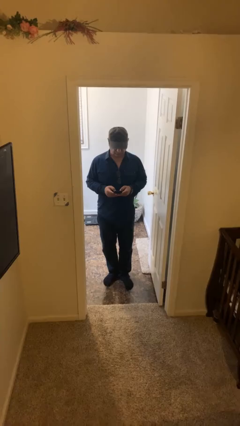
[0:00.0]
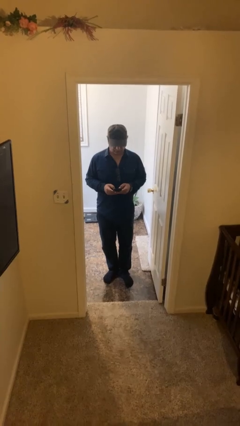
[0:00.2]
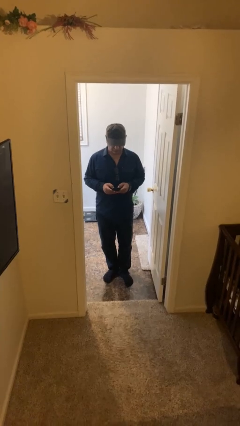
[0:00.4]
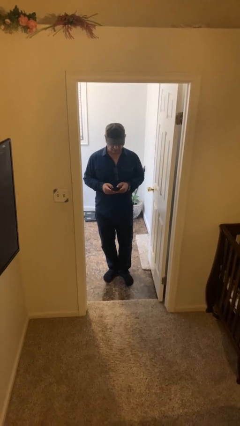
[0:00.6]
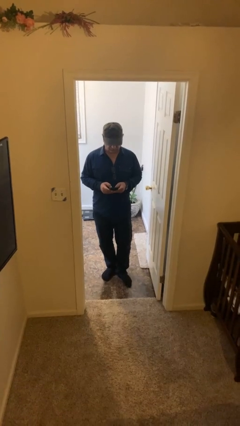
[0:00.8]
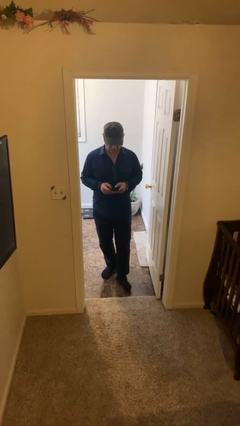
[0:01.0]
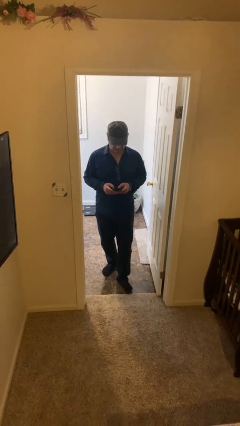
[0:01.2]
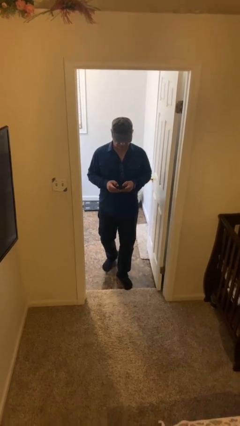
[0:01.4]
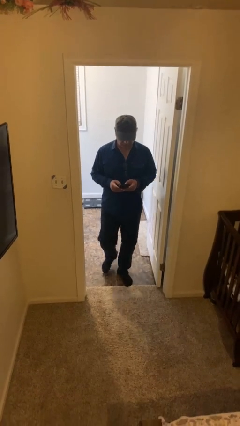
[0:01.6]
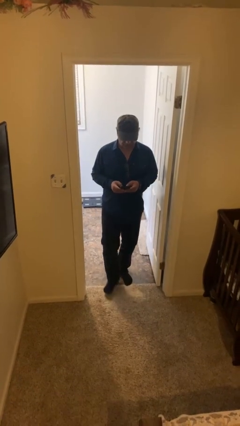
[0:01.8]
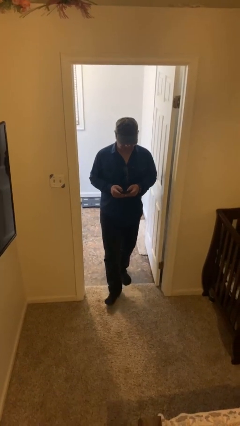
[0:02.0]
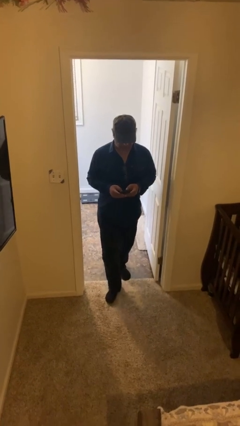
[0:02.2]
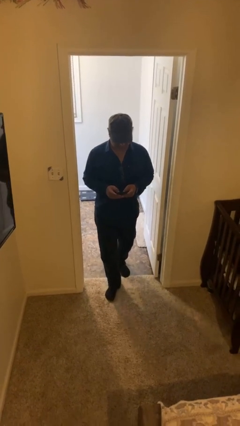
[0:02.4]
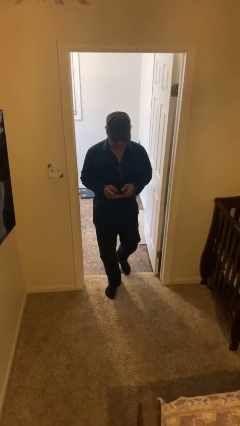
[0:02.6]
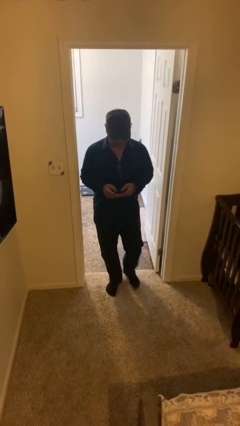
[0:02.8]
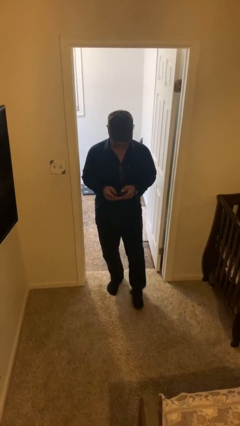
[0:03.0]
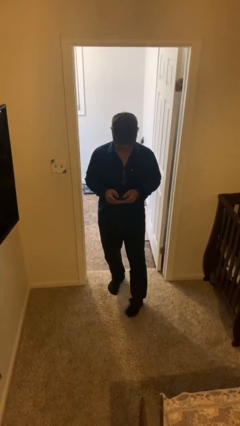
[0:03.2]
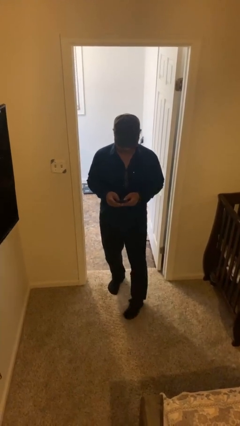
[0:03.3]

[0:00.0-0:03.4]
person enters scene through structure

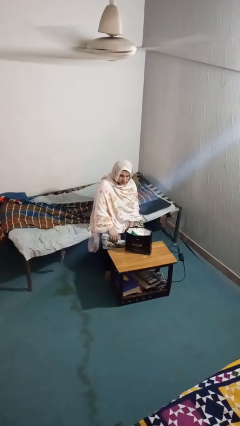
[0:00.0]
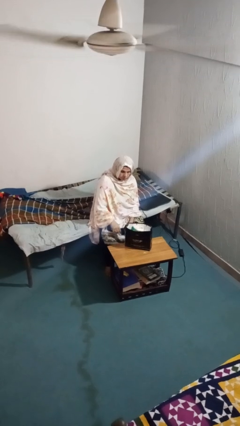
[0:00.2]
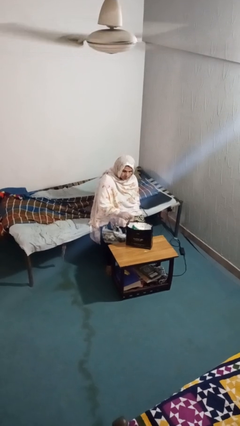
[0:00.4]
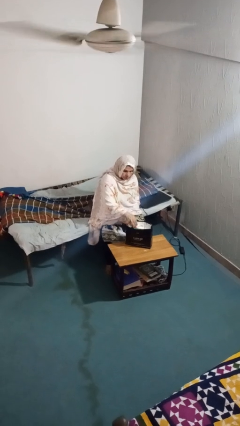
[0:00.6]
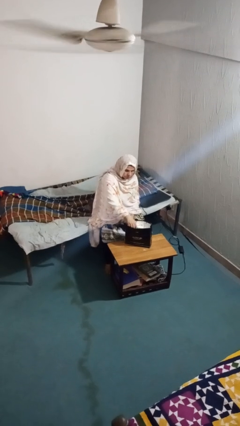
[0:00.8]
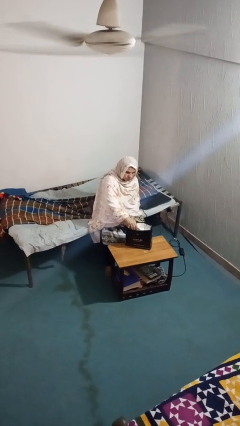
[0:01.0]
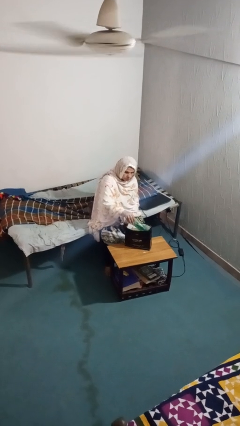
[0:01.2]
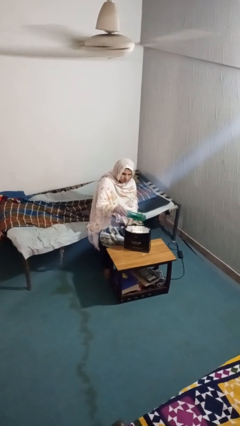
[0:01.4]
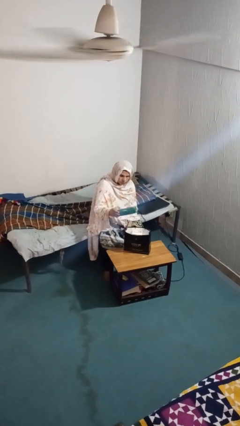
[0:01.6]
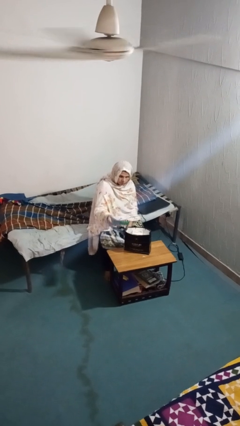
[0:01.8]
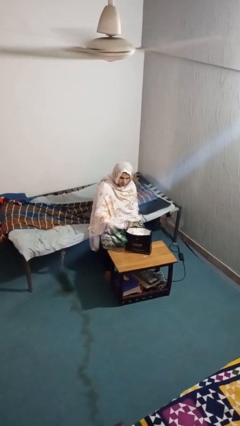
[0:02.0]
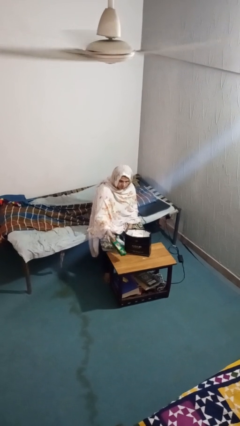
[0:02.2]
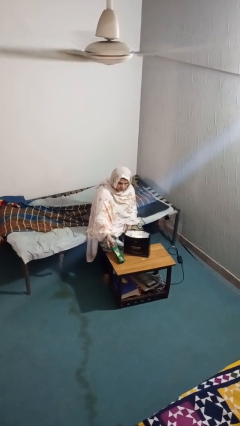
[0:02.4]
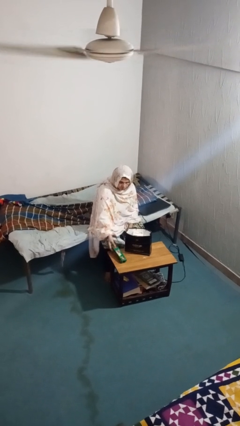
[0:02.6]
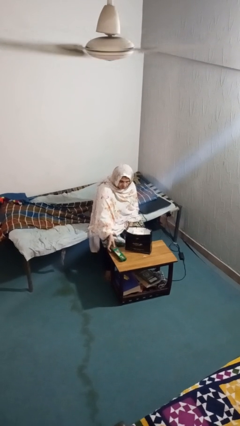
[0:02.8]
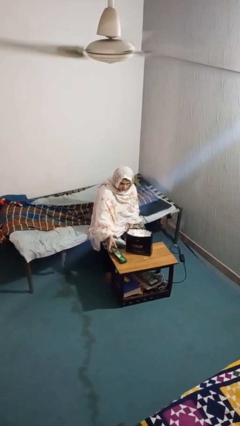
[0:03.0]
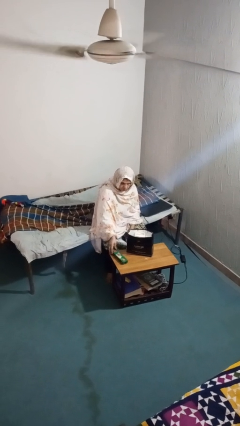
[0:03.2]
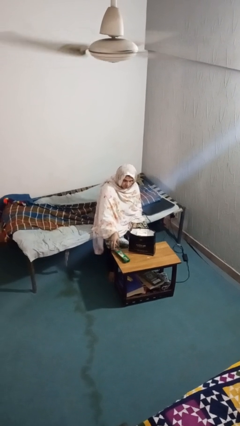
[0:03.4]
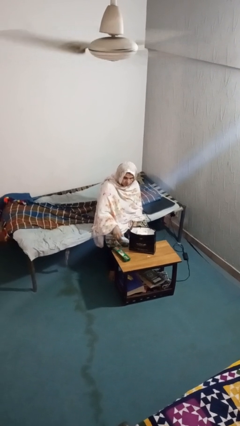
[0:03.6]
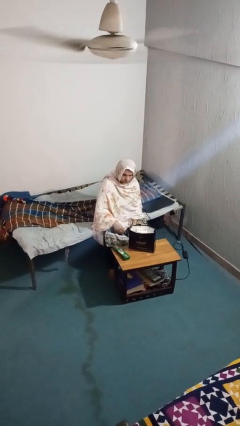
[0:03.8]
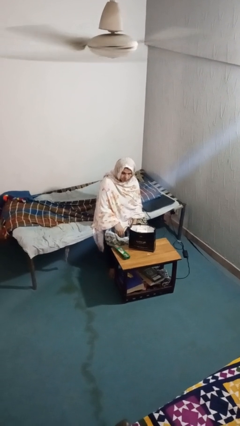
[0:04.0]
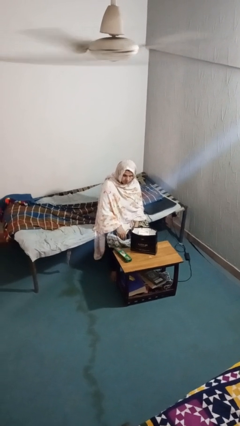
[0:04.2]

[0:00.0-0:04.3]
person takes object from bag

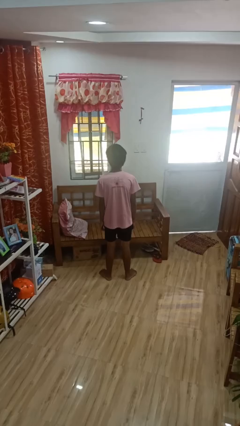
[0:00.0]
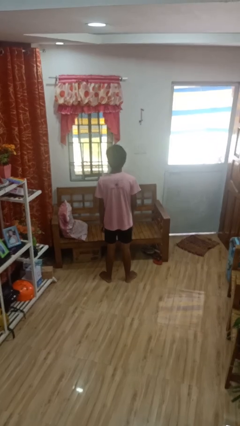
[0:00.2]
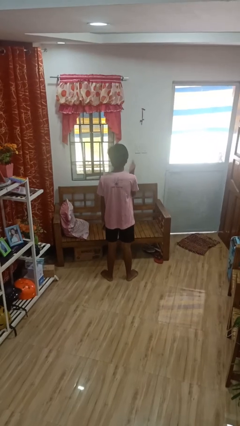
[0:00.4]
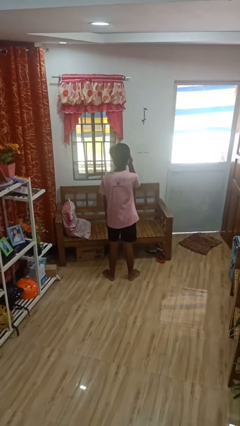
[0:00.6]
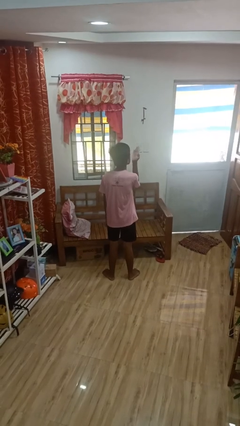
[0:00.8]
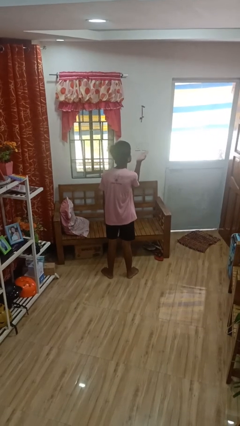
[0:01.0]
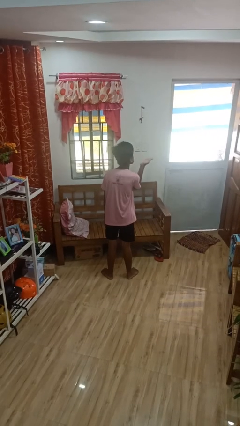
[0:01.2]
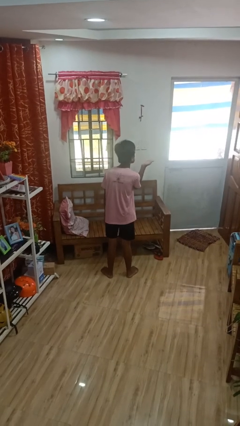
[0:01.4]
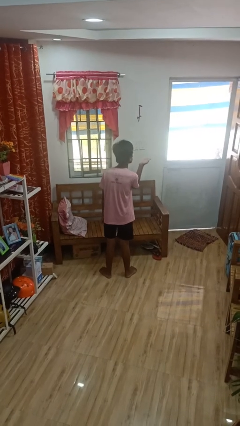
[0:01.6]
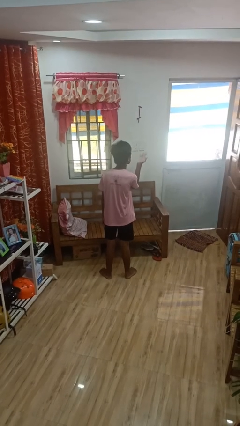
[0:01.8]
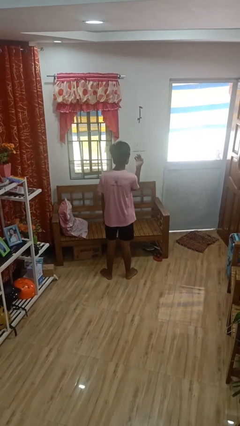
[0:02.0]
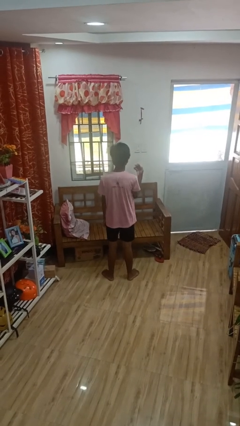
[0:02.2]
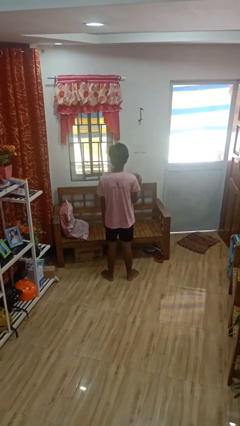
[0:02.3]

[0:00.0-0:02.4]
person gestures blow kiss

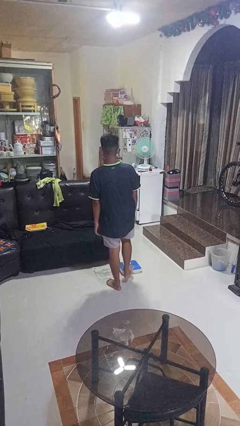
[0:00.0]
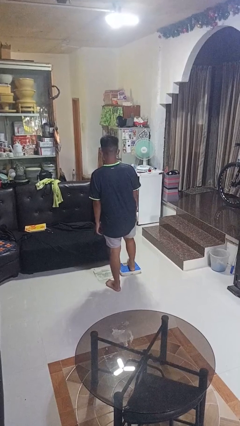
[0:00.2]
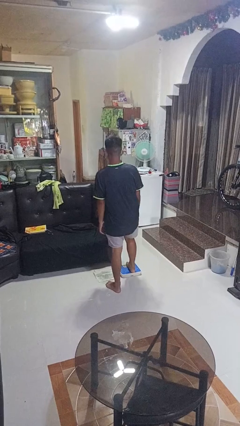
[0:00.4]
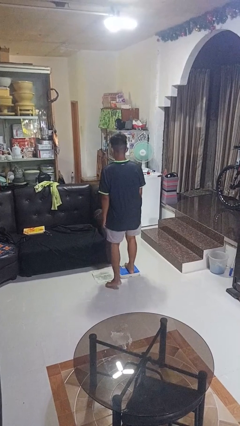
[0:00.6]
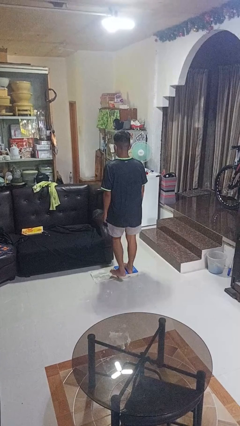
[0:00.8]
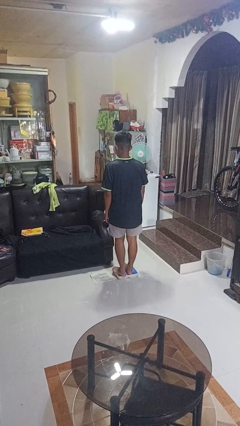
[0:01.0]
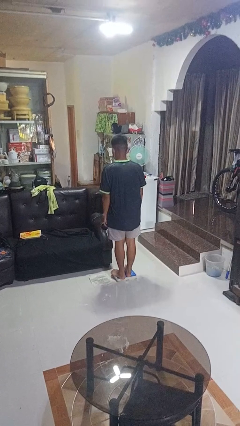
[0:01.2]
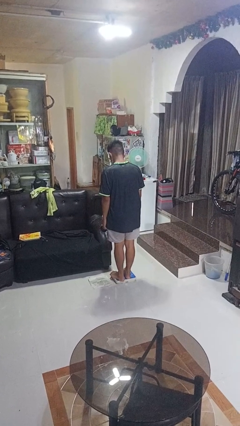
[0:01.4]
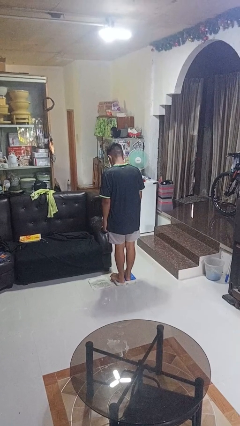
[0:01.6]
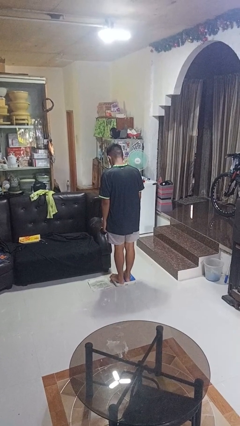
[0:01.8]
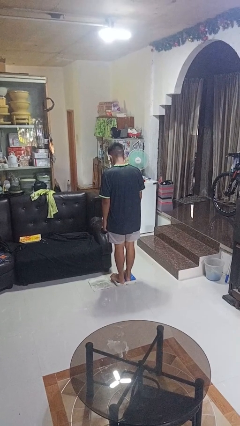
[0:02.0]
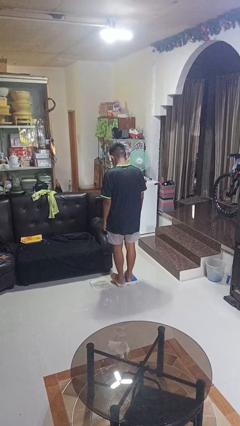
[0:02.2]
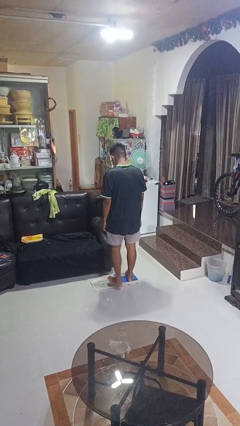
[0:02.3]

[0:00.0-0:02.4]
person uses bodyweight scale

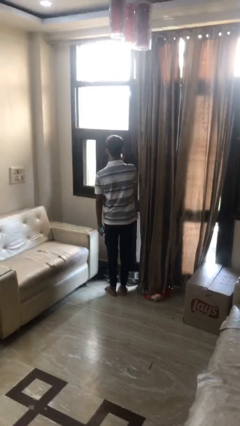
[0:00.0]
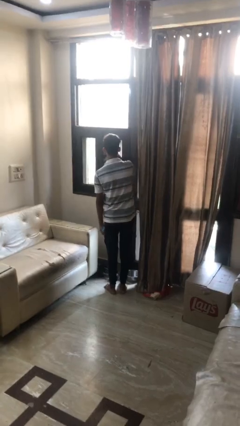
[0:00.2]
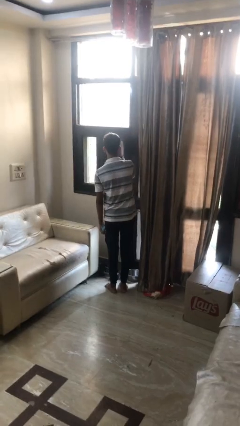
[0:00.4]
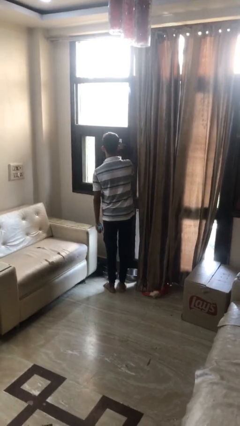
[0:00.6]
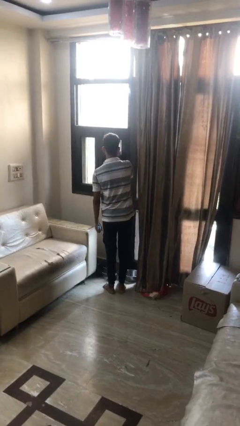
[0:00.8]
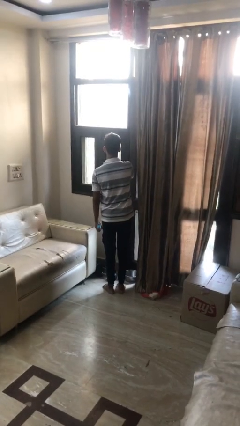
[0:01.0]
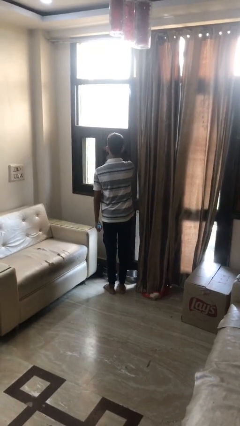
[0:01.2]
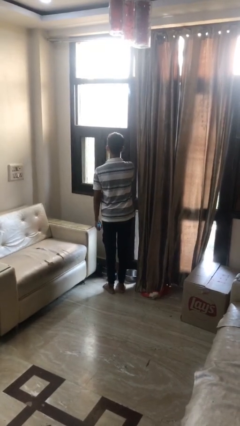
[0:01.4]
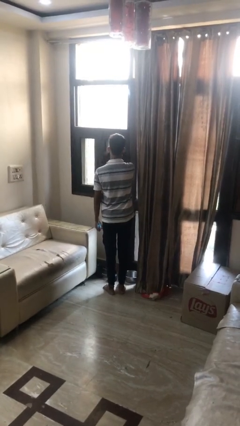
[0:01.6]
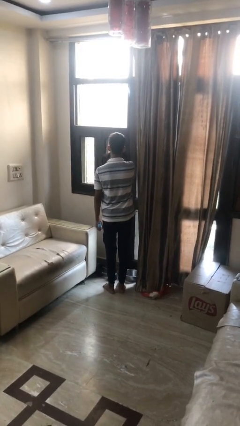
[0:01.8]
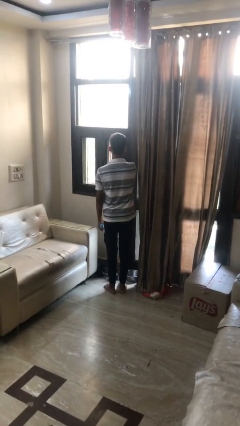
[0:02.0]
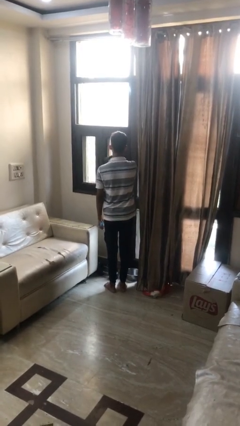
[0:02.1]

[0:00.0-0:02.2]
person washes window

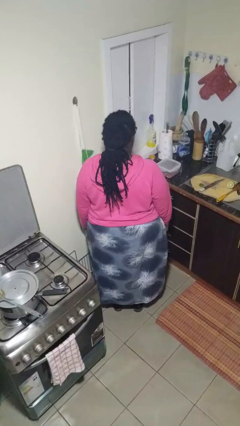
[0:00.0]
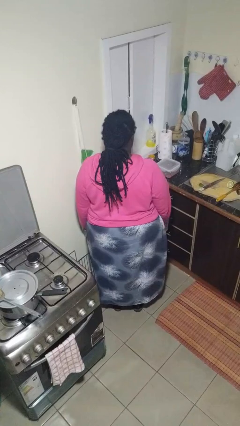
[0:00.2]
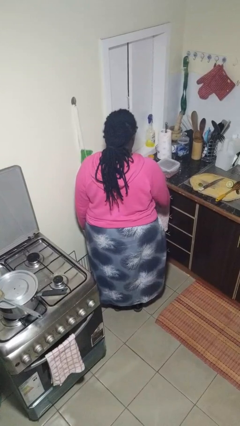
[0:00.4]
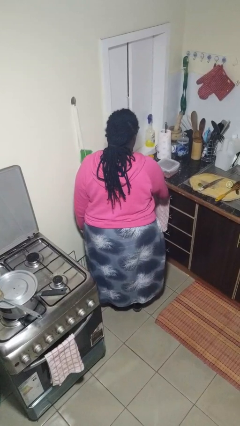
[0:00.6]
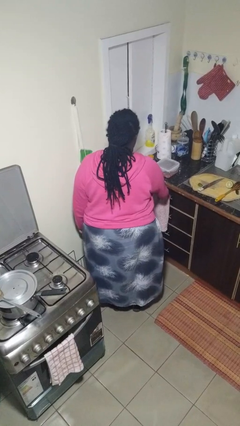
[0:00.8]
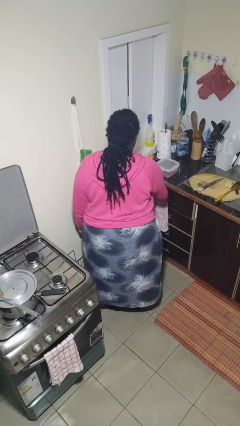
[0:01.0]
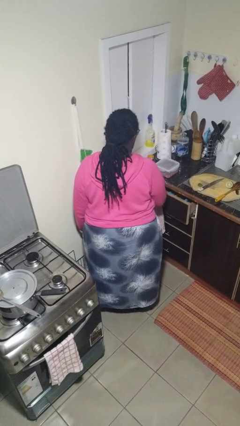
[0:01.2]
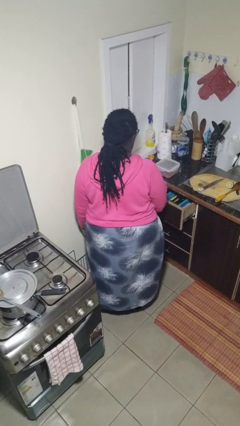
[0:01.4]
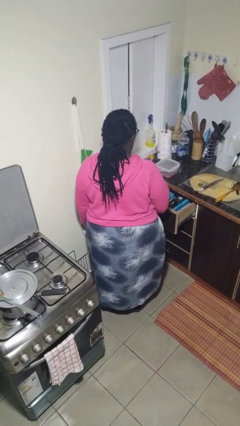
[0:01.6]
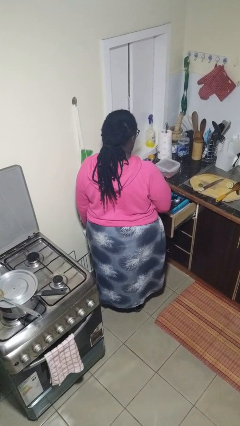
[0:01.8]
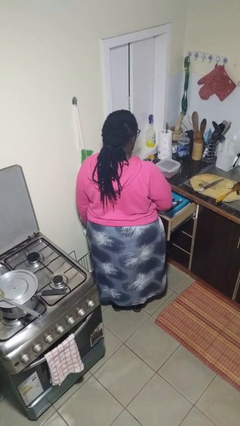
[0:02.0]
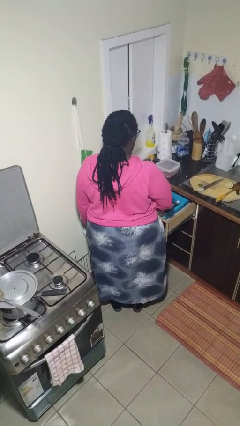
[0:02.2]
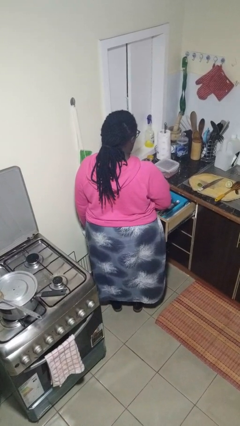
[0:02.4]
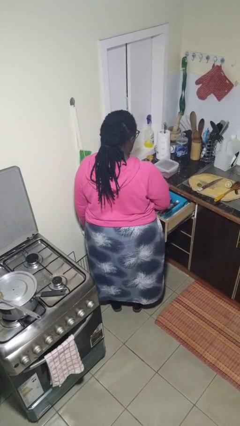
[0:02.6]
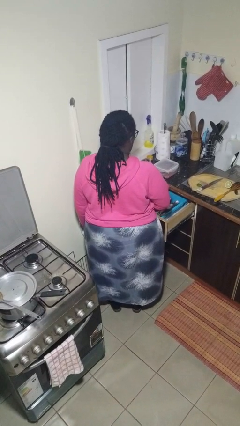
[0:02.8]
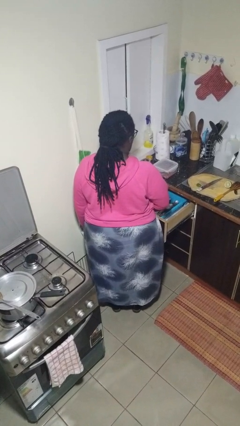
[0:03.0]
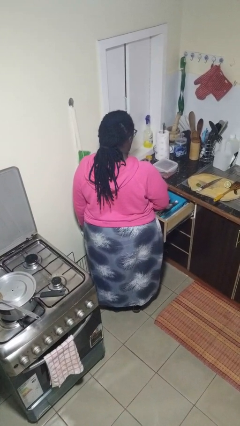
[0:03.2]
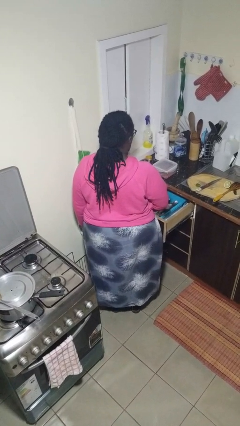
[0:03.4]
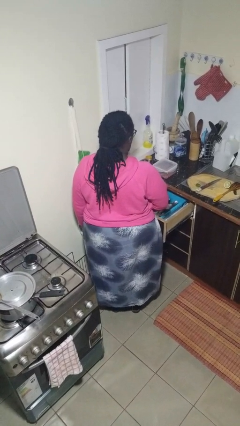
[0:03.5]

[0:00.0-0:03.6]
person opens kitchen drawer
